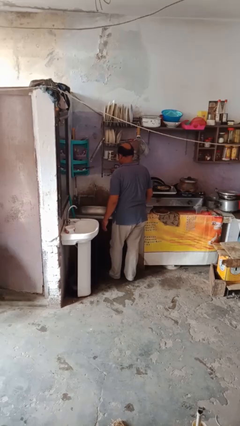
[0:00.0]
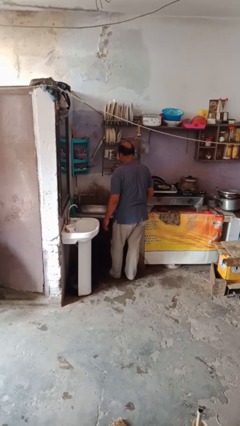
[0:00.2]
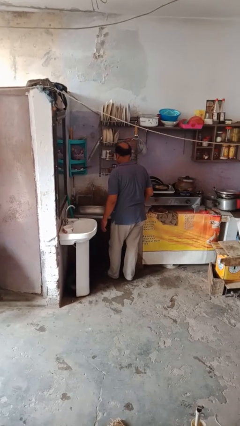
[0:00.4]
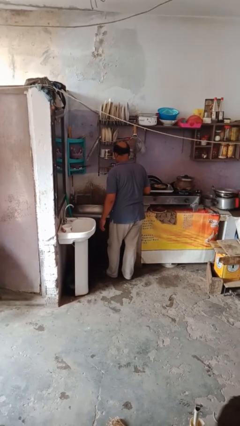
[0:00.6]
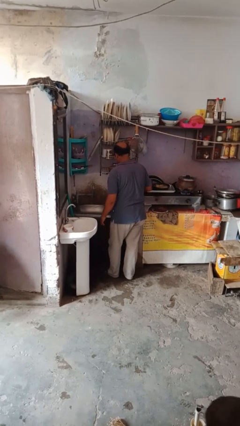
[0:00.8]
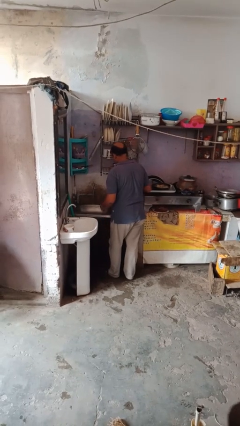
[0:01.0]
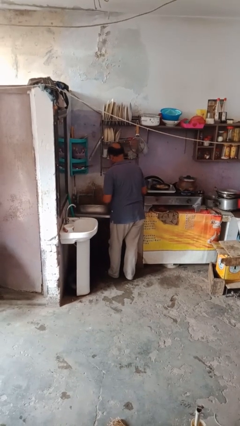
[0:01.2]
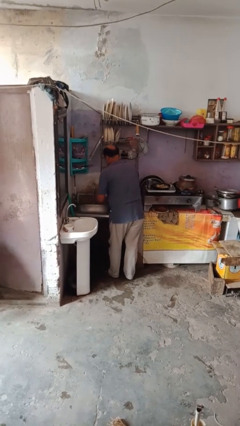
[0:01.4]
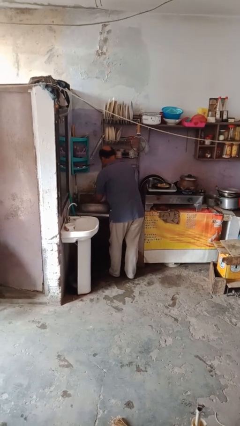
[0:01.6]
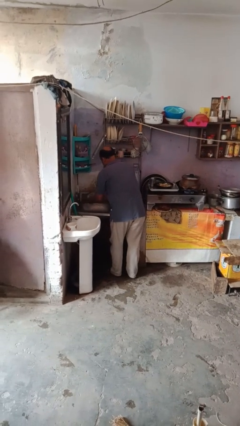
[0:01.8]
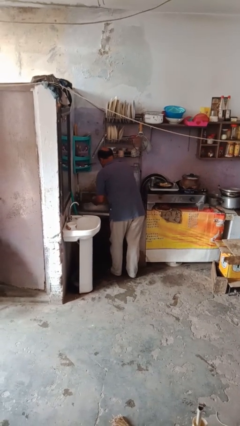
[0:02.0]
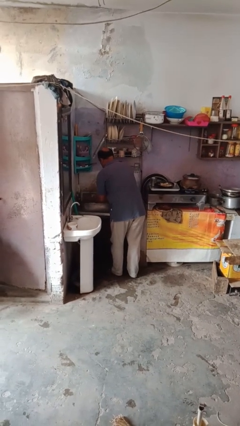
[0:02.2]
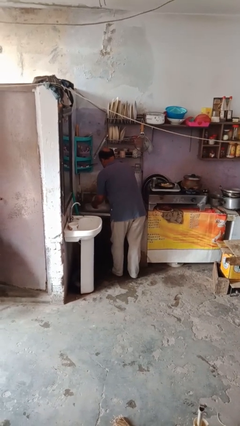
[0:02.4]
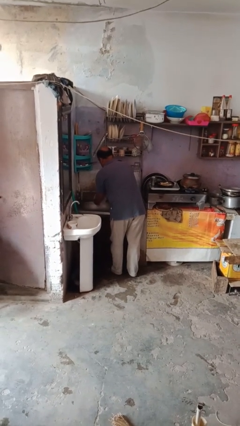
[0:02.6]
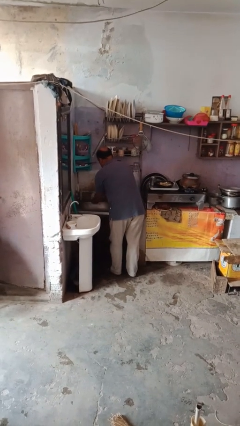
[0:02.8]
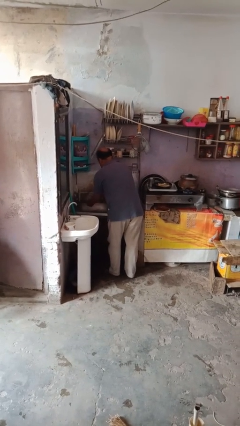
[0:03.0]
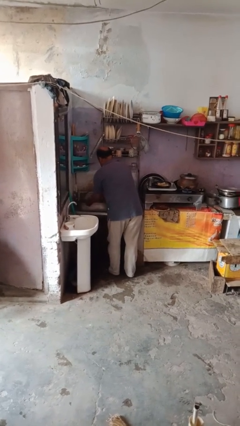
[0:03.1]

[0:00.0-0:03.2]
person washes dish

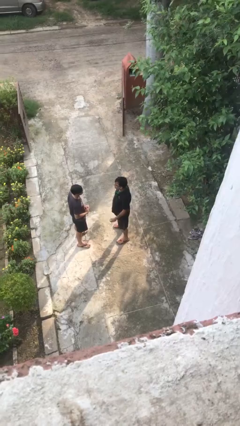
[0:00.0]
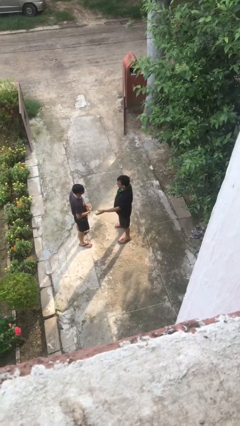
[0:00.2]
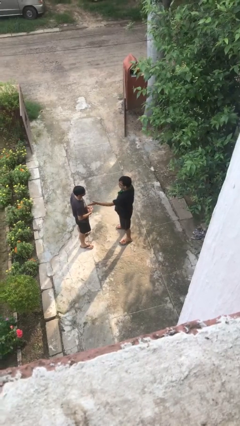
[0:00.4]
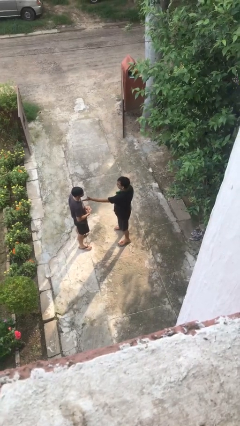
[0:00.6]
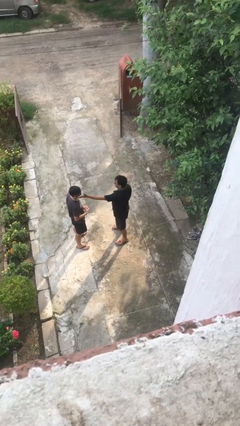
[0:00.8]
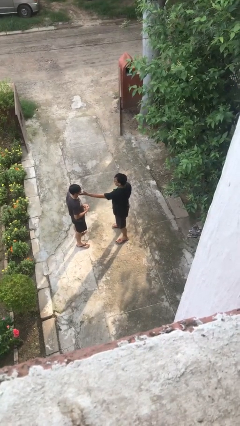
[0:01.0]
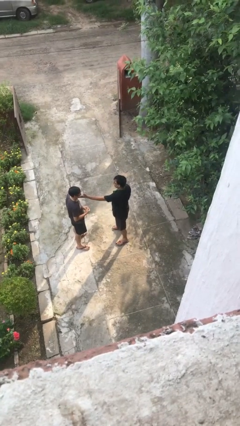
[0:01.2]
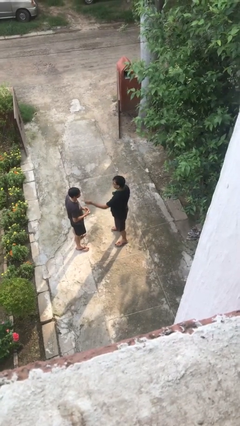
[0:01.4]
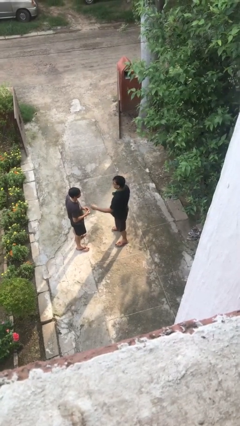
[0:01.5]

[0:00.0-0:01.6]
person touches face of person

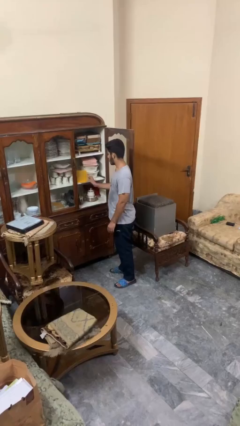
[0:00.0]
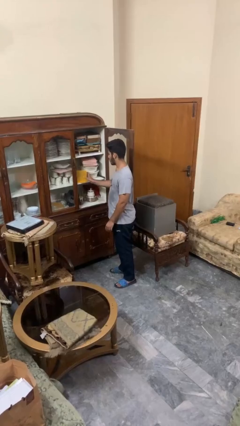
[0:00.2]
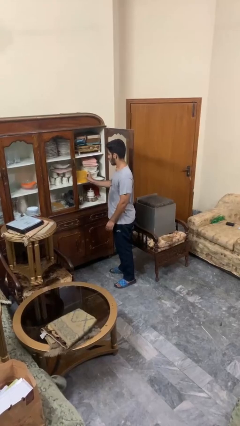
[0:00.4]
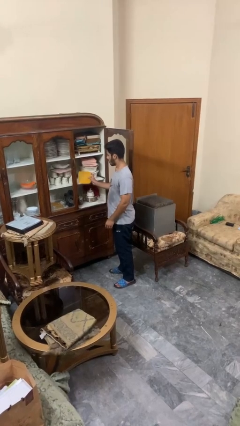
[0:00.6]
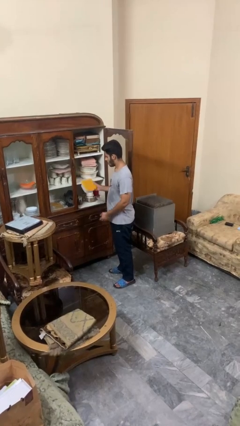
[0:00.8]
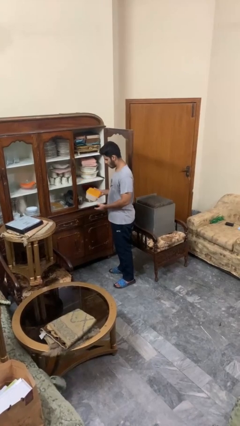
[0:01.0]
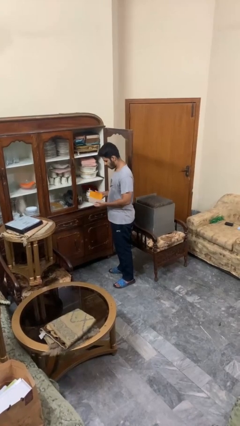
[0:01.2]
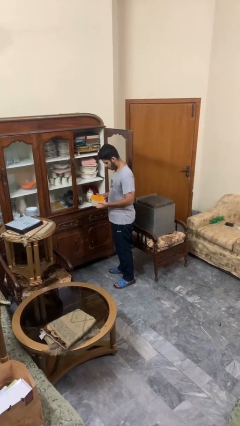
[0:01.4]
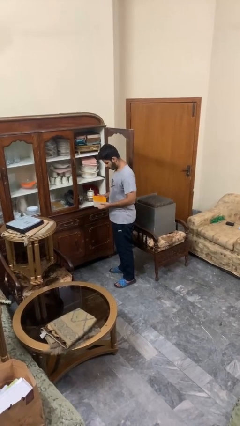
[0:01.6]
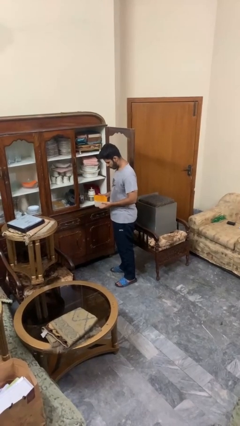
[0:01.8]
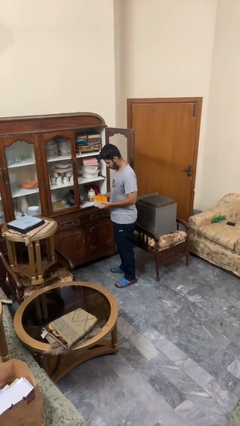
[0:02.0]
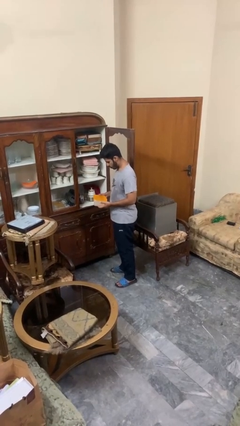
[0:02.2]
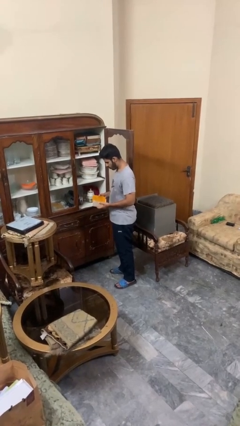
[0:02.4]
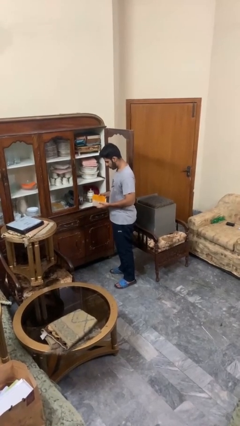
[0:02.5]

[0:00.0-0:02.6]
person picks up object from cabinet

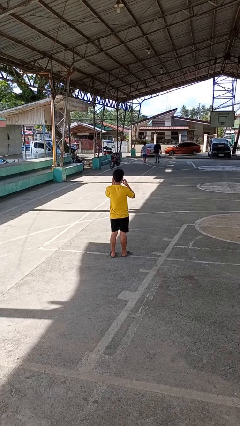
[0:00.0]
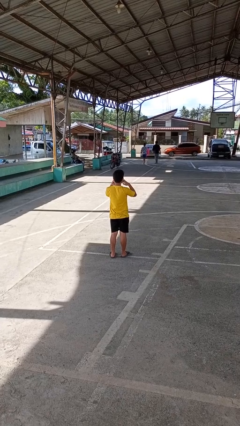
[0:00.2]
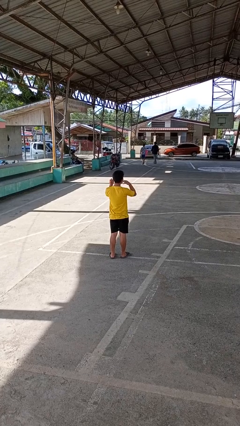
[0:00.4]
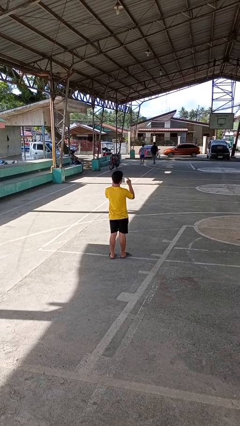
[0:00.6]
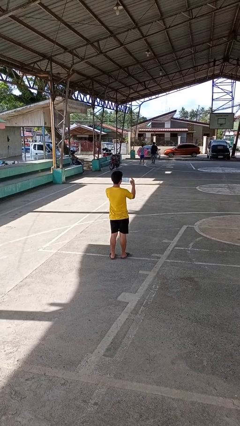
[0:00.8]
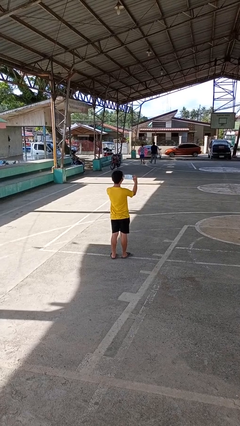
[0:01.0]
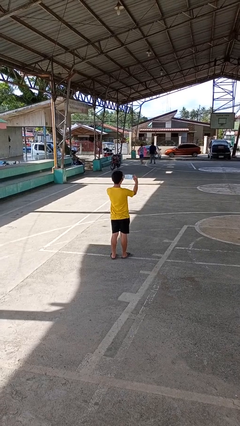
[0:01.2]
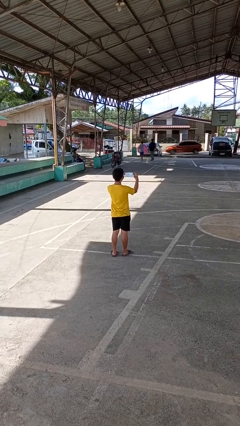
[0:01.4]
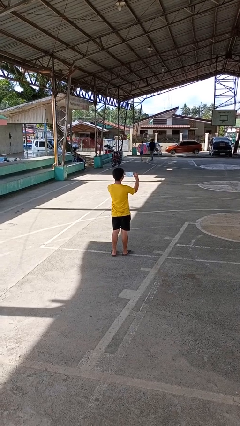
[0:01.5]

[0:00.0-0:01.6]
person takes off facemask

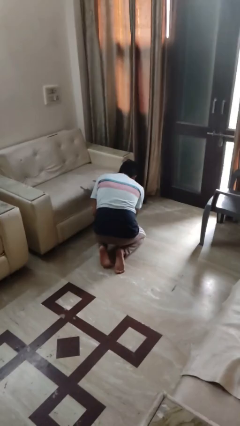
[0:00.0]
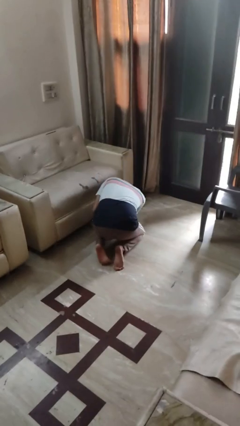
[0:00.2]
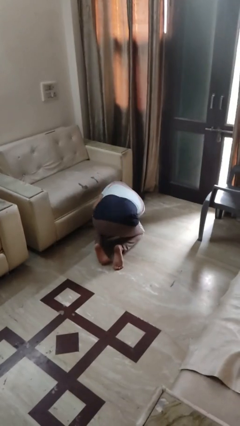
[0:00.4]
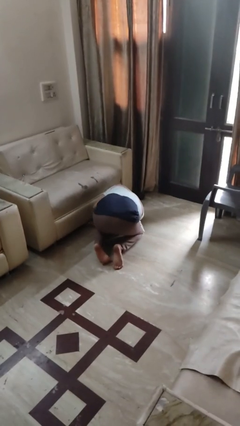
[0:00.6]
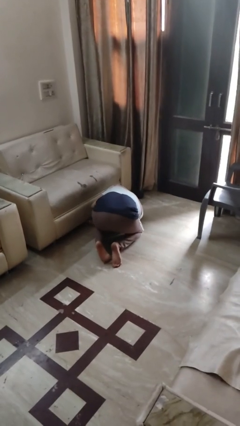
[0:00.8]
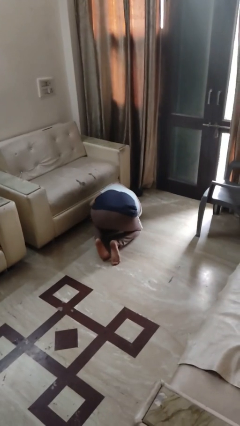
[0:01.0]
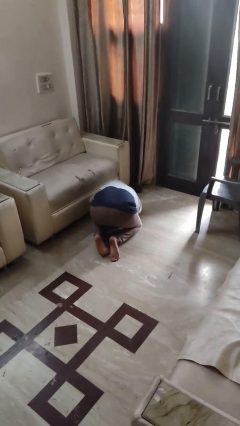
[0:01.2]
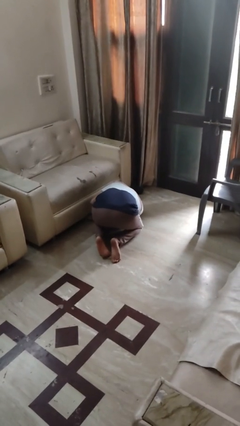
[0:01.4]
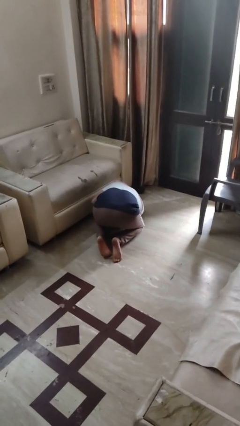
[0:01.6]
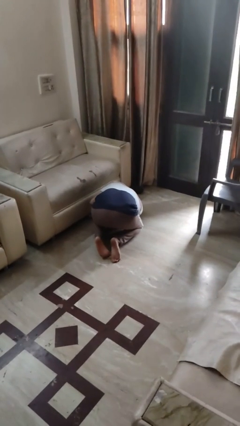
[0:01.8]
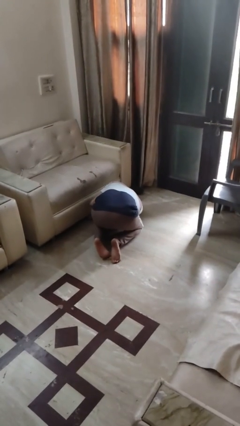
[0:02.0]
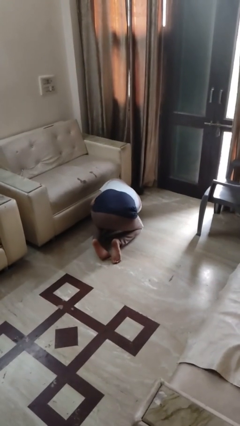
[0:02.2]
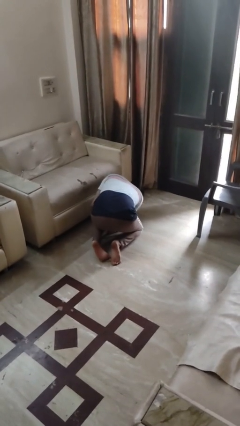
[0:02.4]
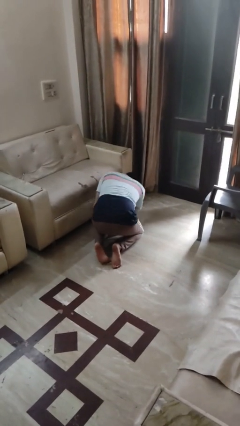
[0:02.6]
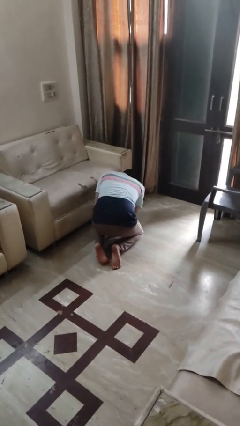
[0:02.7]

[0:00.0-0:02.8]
person searches under couch

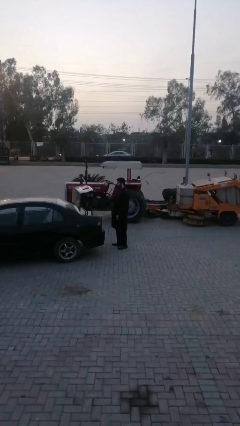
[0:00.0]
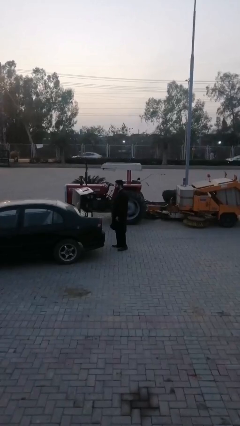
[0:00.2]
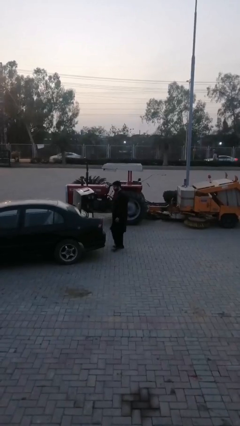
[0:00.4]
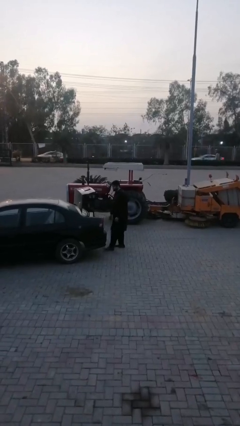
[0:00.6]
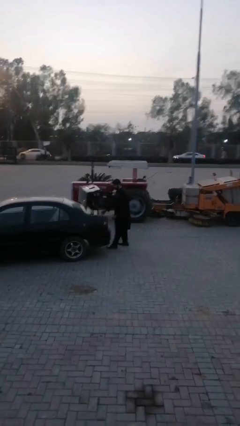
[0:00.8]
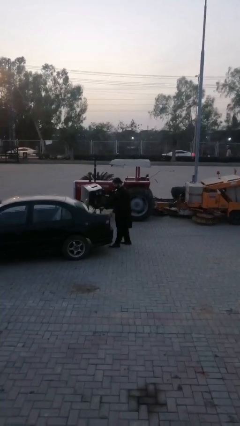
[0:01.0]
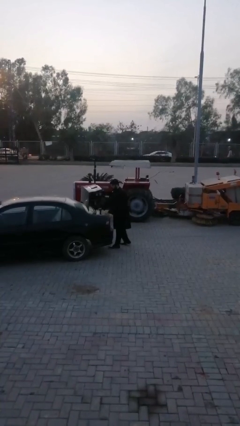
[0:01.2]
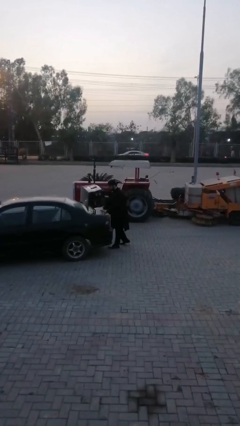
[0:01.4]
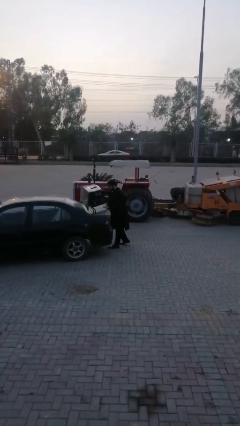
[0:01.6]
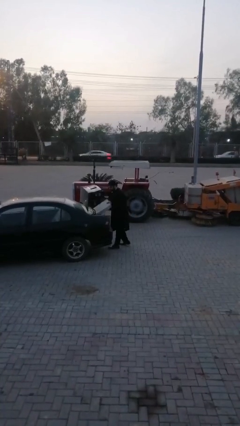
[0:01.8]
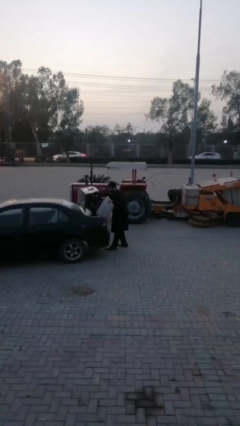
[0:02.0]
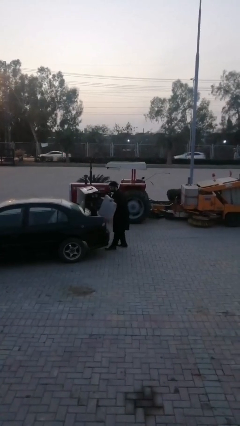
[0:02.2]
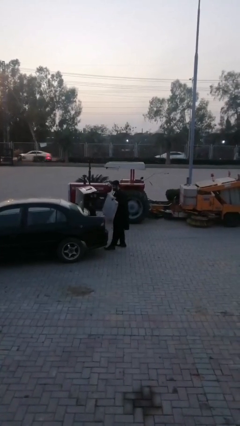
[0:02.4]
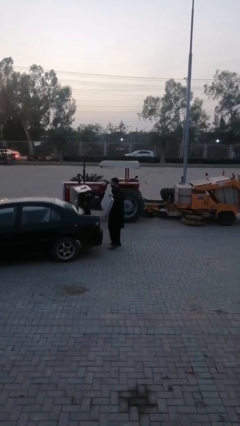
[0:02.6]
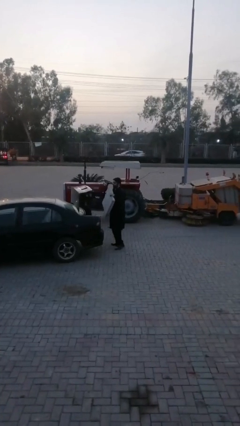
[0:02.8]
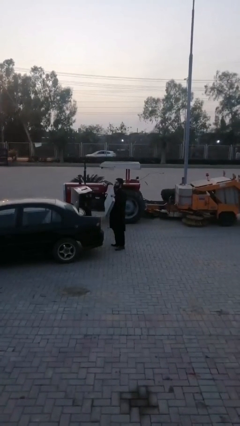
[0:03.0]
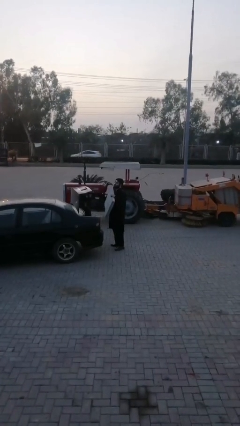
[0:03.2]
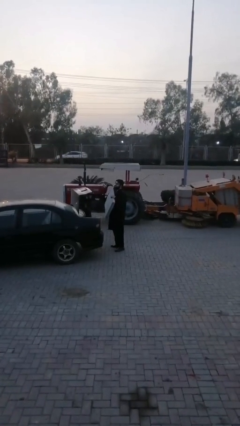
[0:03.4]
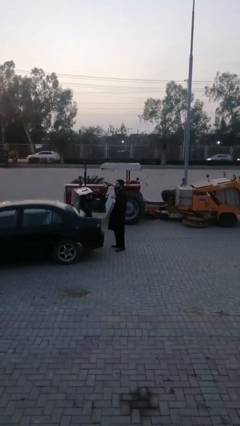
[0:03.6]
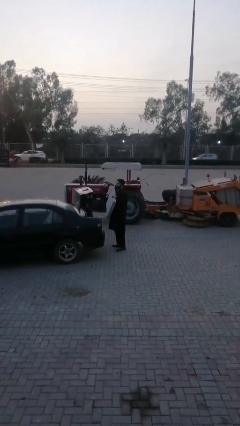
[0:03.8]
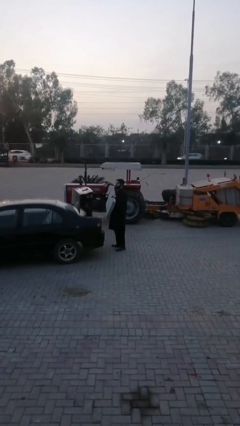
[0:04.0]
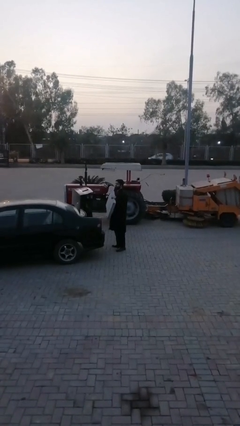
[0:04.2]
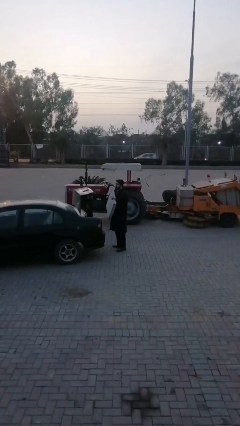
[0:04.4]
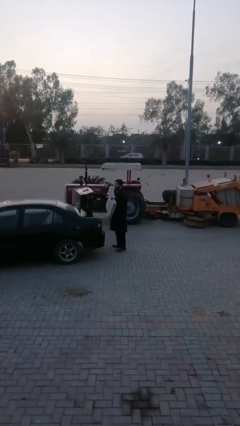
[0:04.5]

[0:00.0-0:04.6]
person unloads car

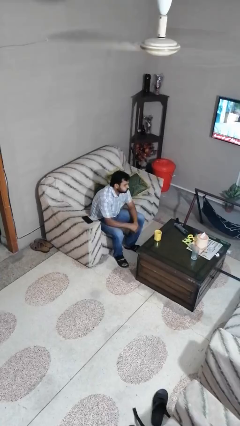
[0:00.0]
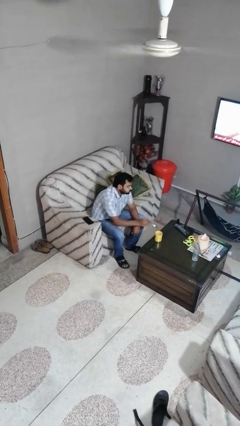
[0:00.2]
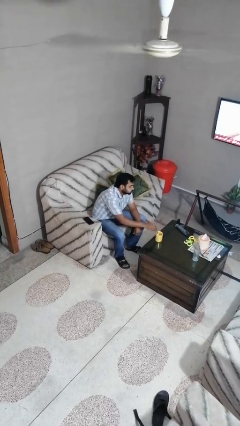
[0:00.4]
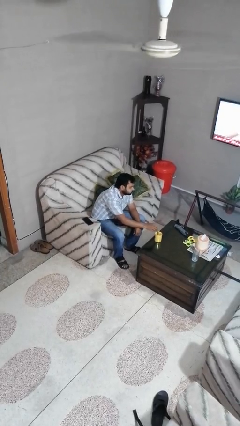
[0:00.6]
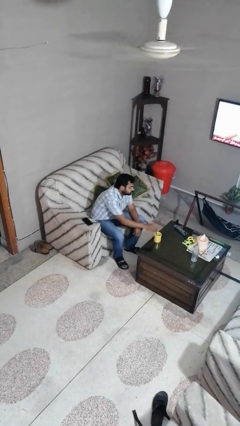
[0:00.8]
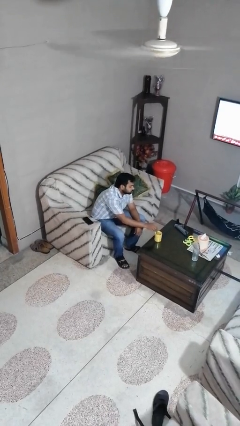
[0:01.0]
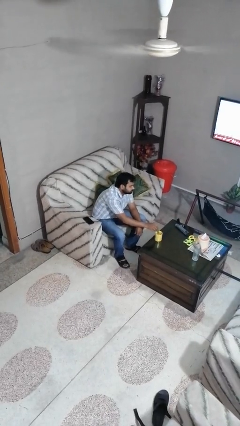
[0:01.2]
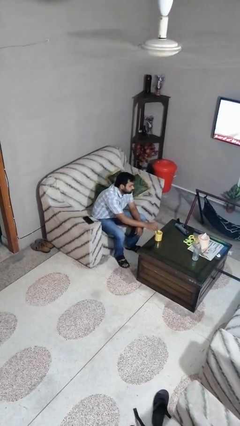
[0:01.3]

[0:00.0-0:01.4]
person stirs mug
